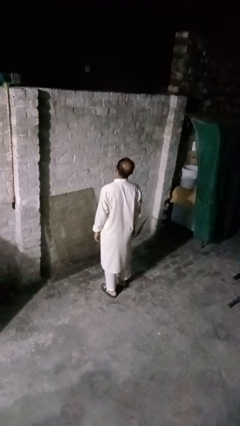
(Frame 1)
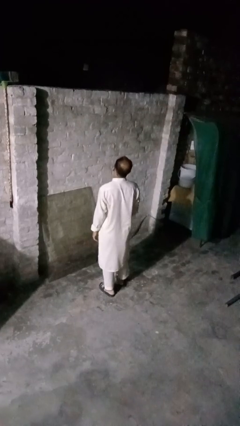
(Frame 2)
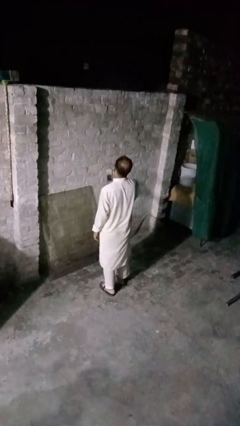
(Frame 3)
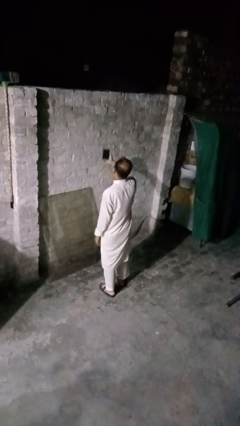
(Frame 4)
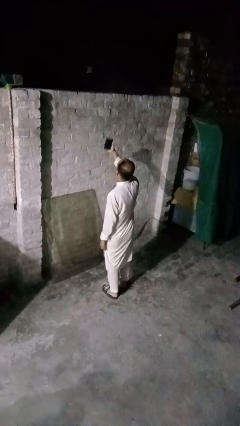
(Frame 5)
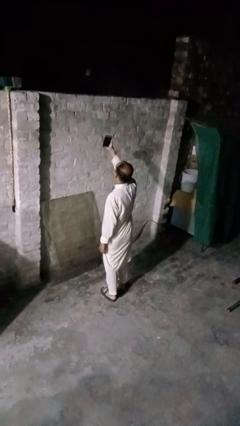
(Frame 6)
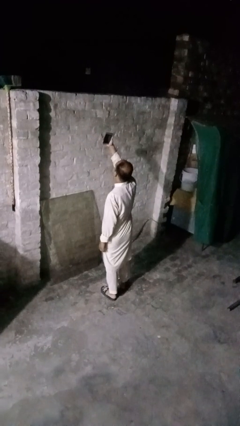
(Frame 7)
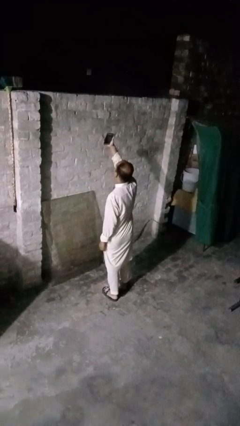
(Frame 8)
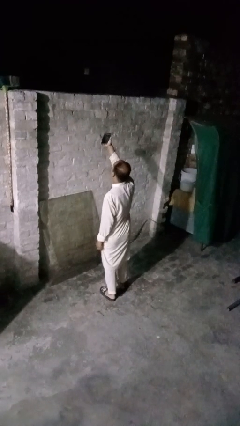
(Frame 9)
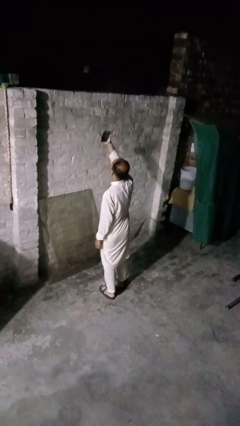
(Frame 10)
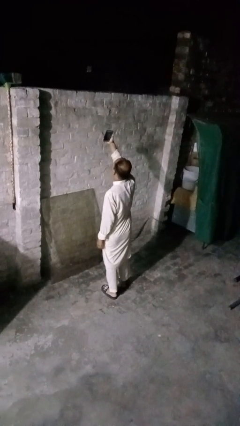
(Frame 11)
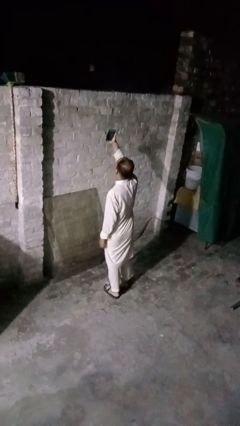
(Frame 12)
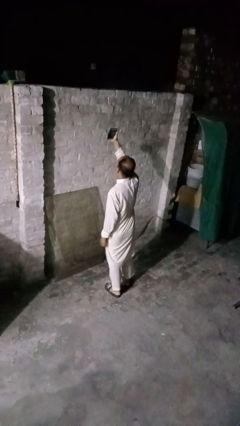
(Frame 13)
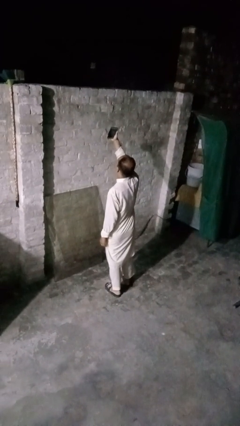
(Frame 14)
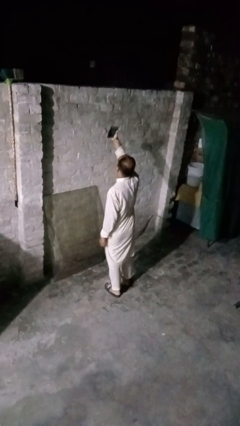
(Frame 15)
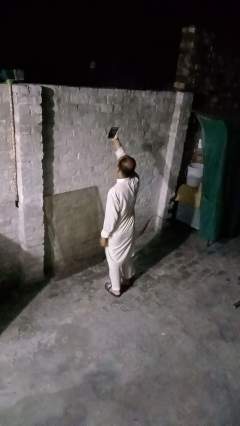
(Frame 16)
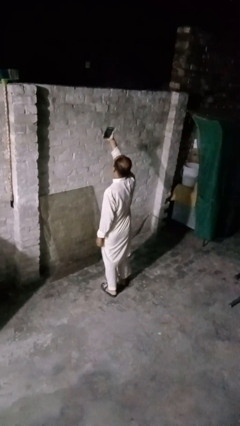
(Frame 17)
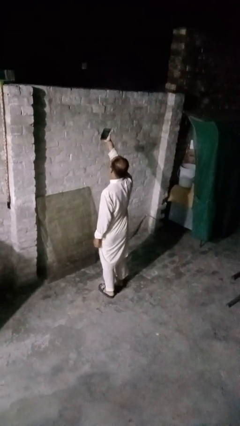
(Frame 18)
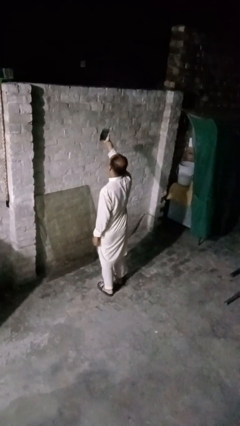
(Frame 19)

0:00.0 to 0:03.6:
person takes selfie

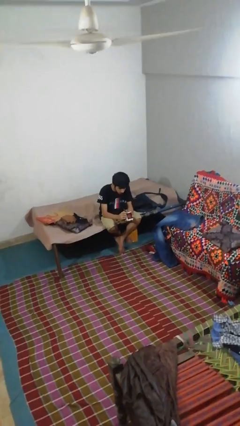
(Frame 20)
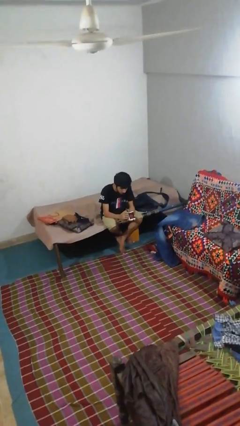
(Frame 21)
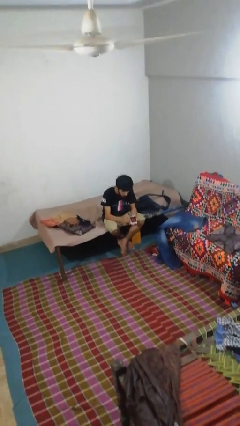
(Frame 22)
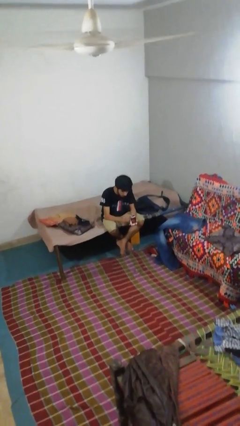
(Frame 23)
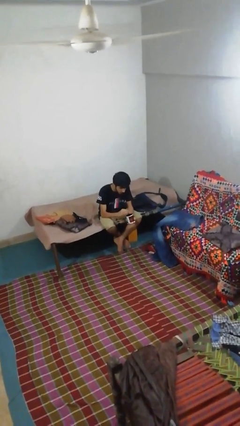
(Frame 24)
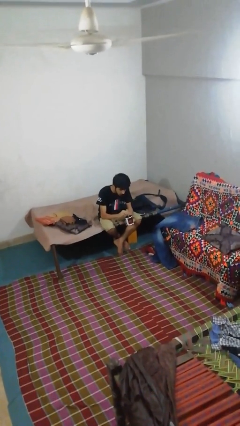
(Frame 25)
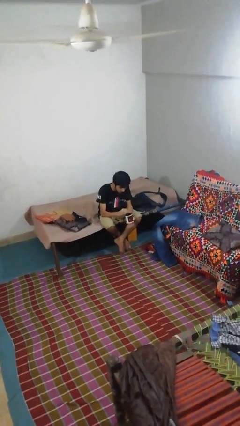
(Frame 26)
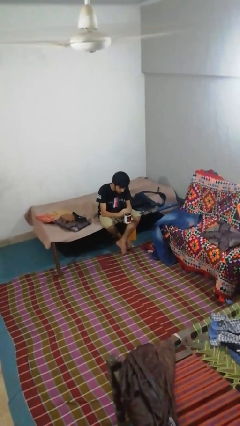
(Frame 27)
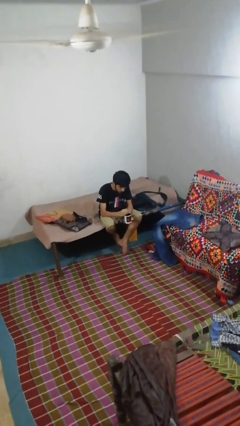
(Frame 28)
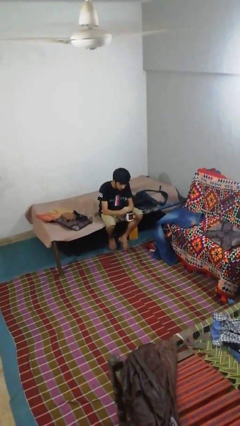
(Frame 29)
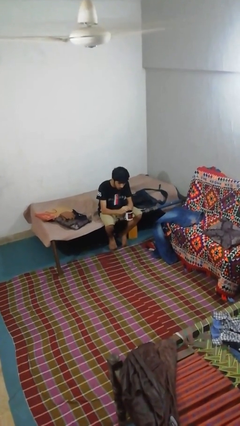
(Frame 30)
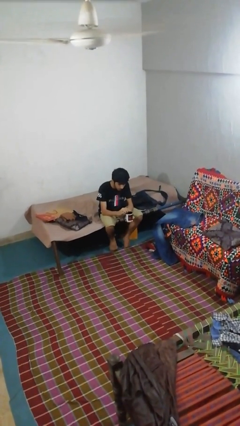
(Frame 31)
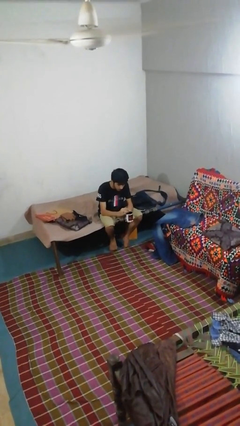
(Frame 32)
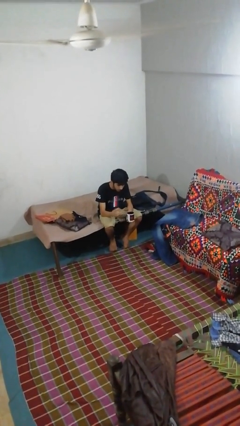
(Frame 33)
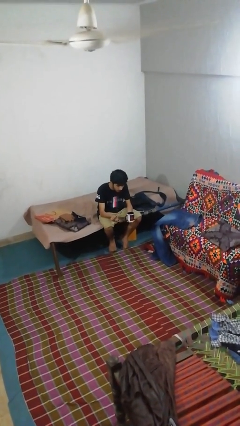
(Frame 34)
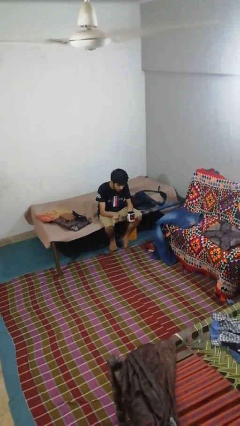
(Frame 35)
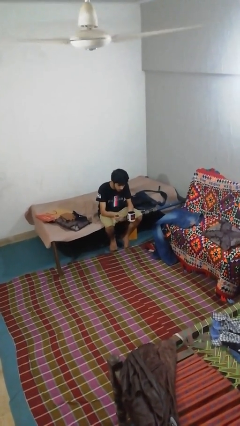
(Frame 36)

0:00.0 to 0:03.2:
person stirs mug

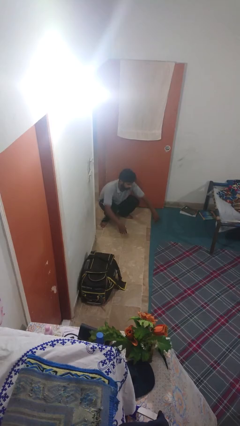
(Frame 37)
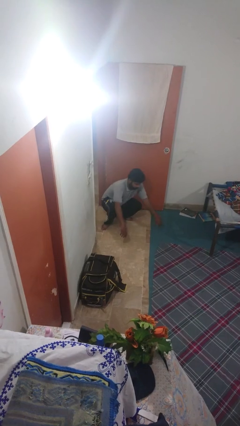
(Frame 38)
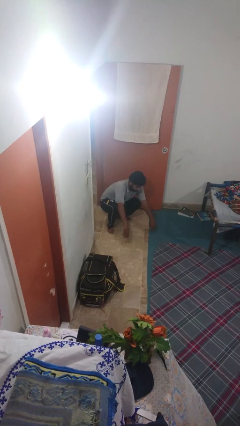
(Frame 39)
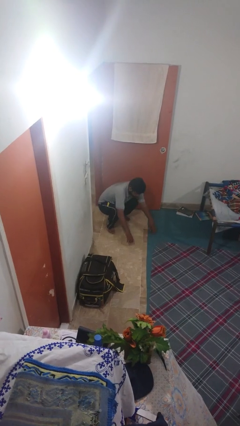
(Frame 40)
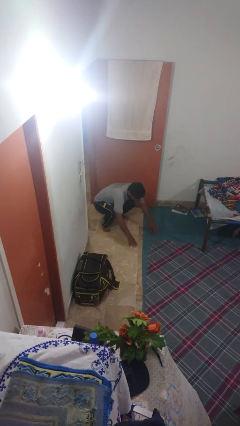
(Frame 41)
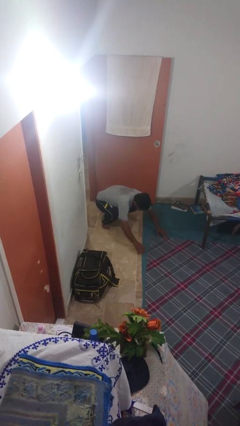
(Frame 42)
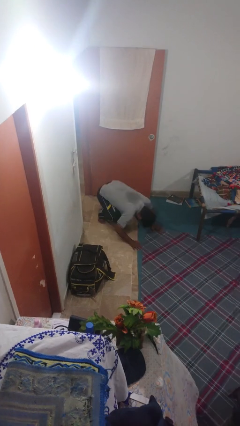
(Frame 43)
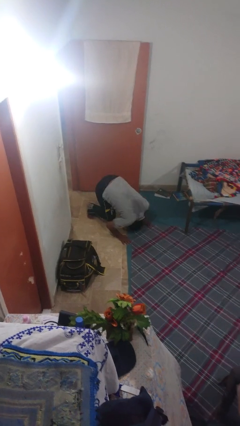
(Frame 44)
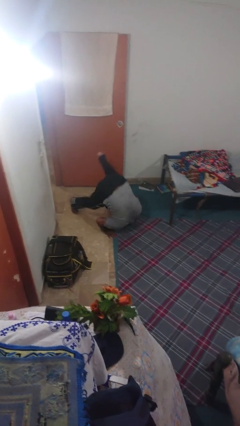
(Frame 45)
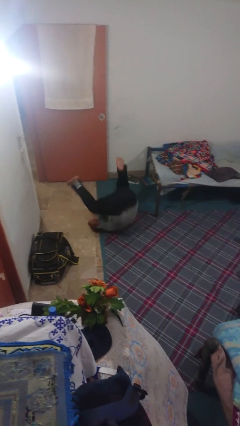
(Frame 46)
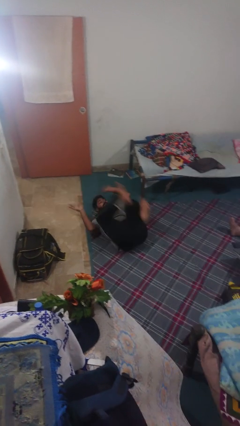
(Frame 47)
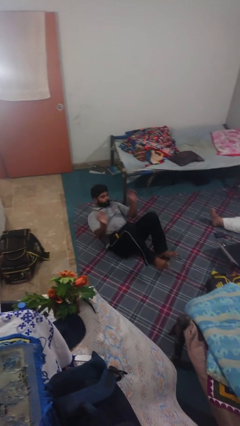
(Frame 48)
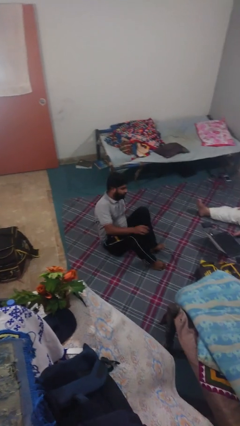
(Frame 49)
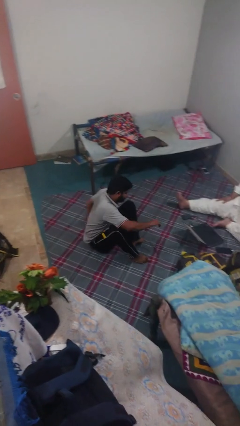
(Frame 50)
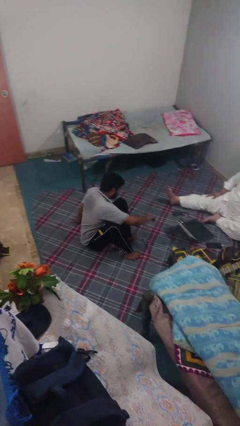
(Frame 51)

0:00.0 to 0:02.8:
person somersaults

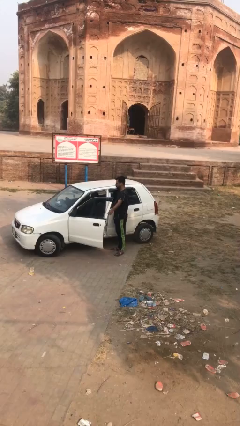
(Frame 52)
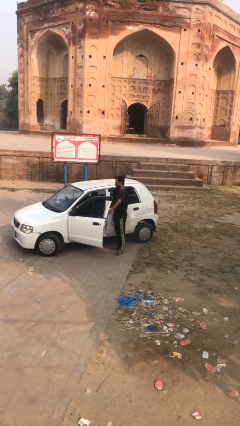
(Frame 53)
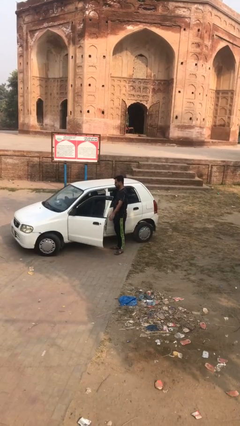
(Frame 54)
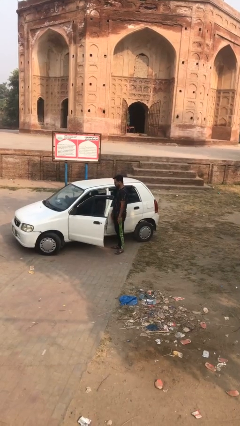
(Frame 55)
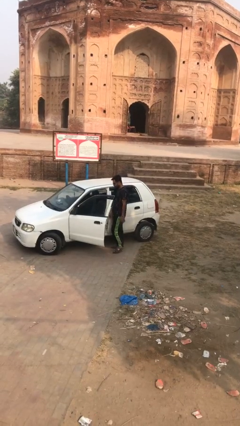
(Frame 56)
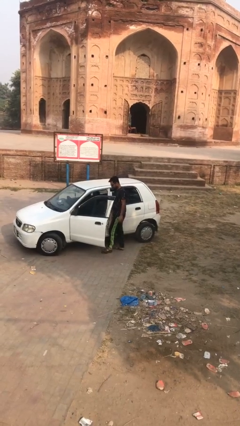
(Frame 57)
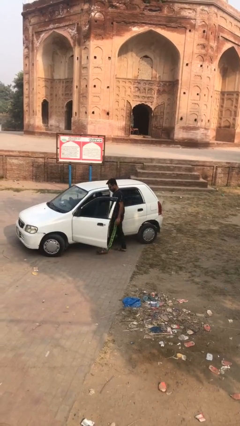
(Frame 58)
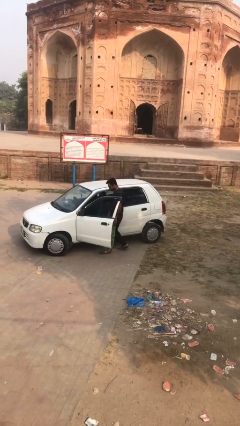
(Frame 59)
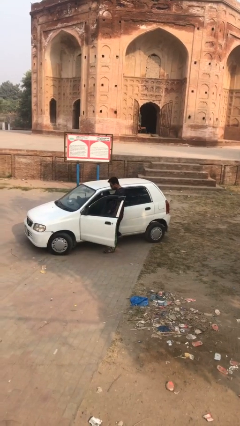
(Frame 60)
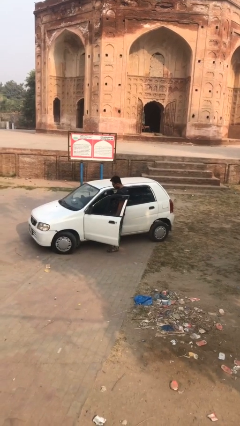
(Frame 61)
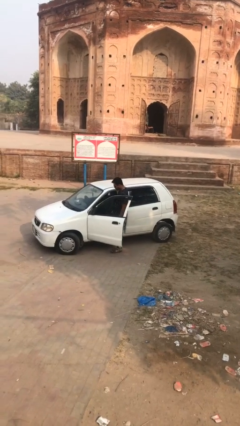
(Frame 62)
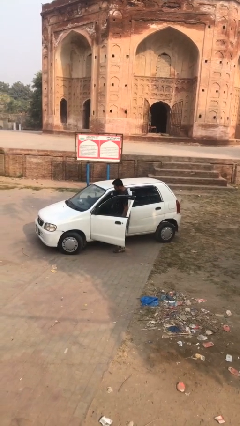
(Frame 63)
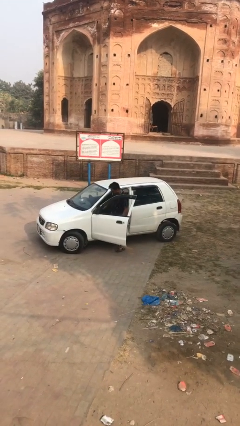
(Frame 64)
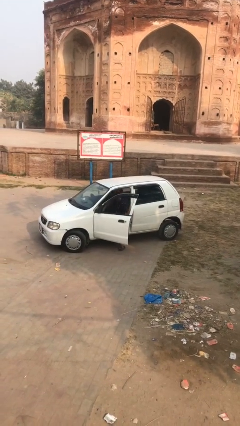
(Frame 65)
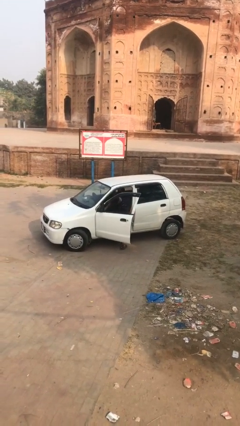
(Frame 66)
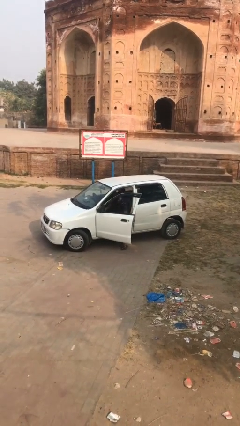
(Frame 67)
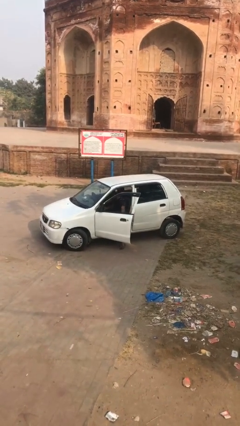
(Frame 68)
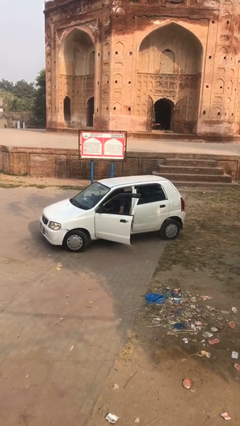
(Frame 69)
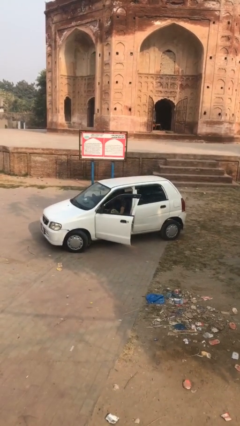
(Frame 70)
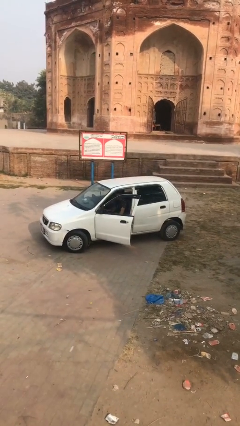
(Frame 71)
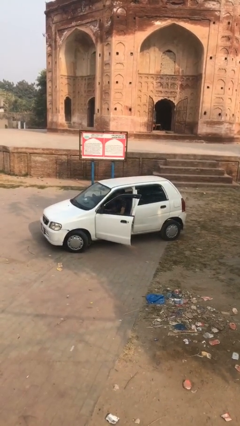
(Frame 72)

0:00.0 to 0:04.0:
person enters car

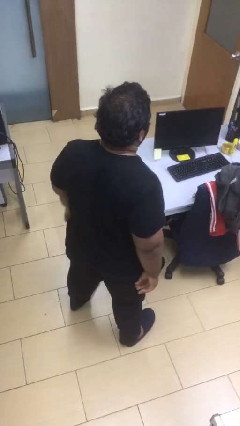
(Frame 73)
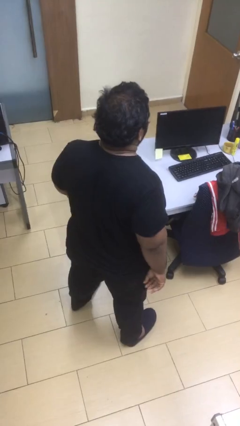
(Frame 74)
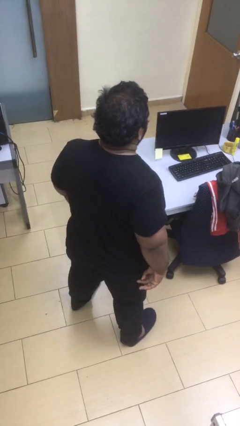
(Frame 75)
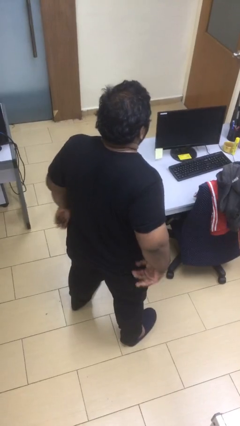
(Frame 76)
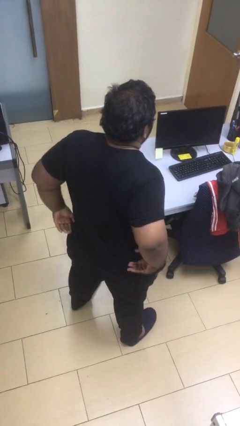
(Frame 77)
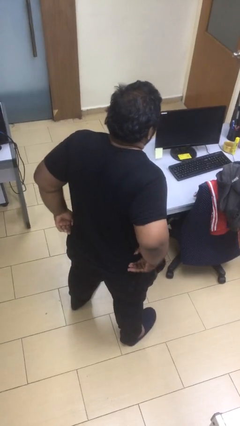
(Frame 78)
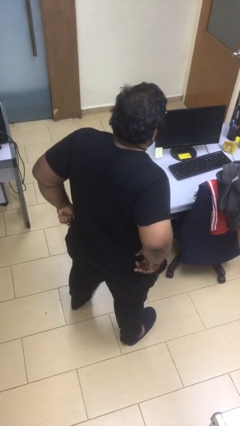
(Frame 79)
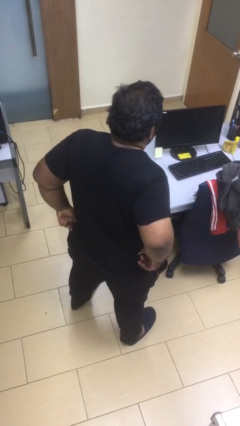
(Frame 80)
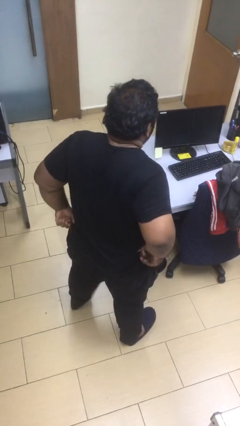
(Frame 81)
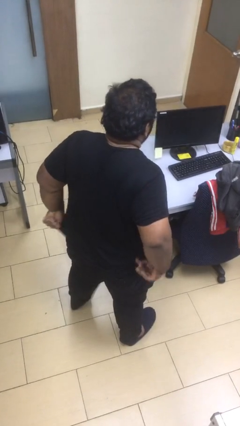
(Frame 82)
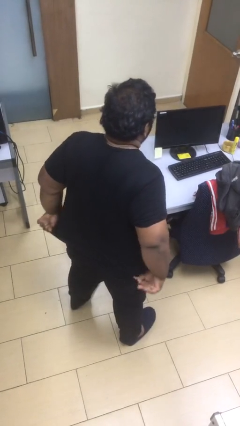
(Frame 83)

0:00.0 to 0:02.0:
person hikes up pants

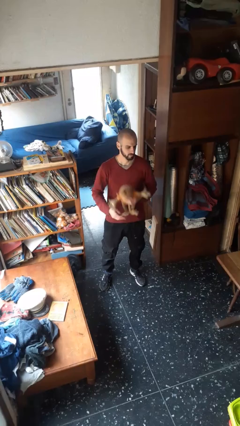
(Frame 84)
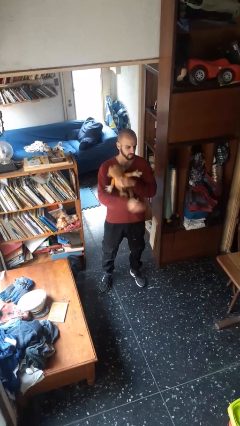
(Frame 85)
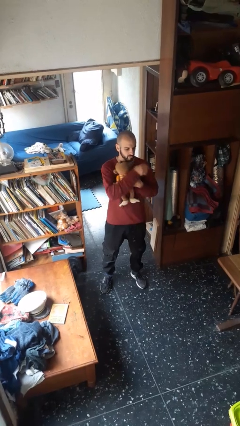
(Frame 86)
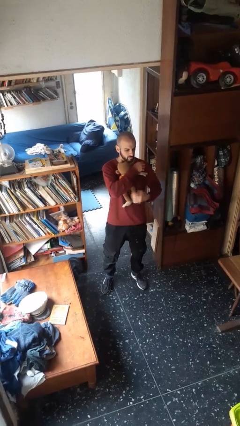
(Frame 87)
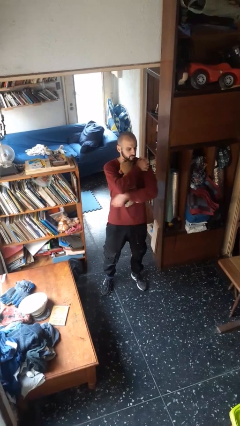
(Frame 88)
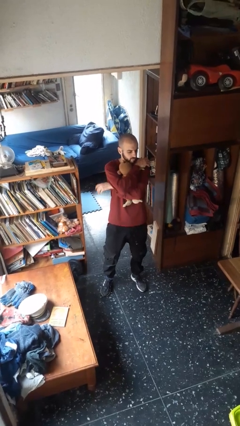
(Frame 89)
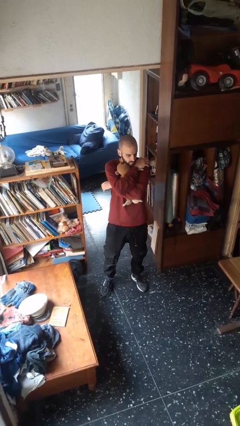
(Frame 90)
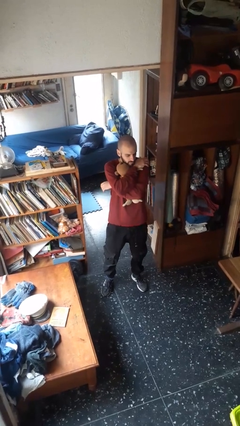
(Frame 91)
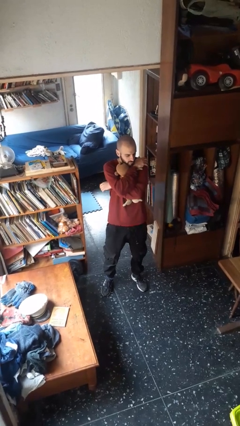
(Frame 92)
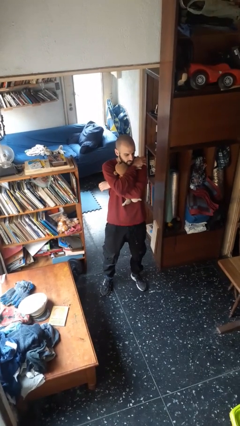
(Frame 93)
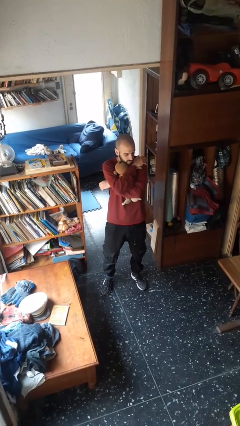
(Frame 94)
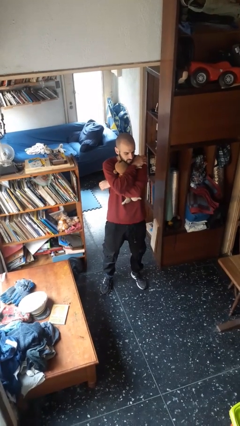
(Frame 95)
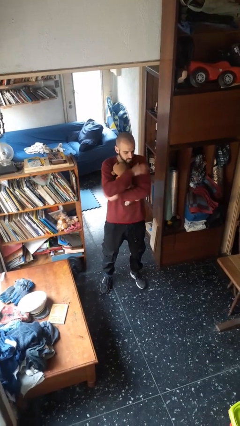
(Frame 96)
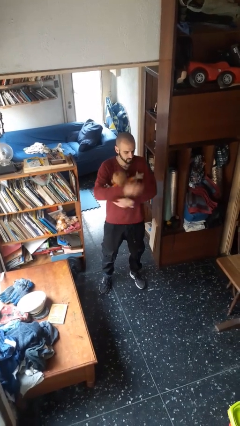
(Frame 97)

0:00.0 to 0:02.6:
person hugs stuffed animal
